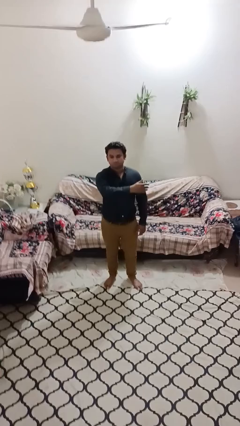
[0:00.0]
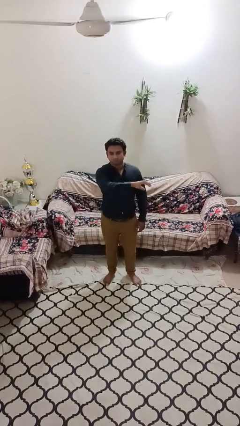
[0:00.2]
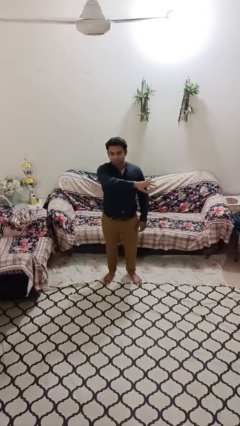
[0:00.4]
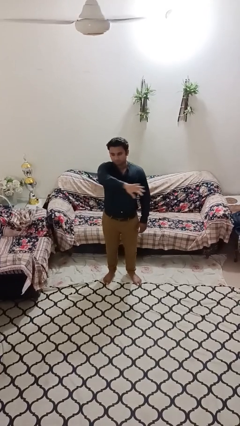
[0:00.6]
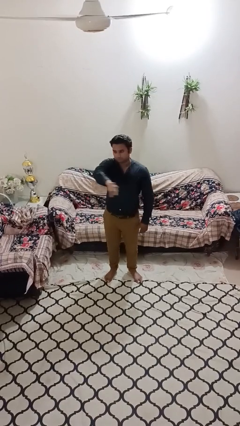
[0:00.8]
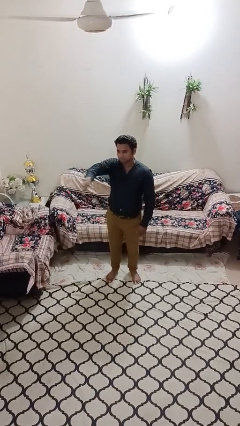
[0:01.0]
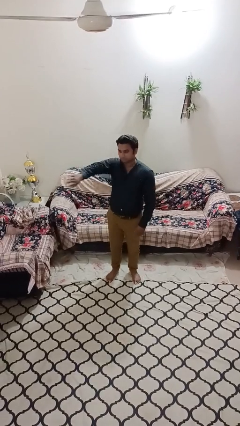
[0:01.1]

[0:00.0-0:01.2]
person gestures swipe right

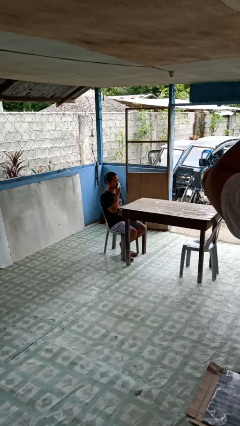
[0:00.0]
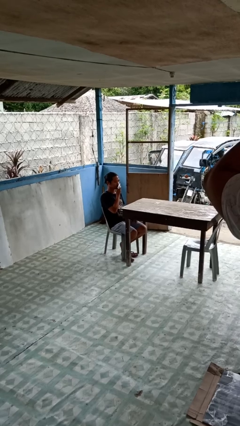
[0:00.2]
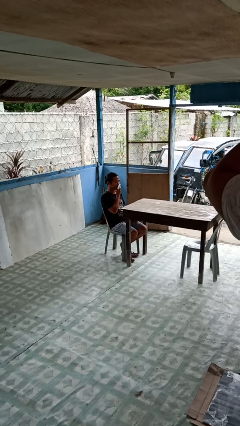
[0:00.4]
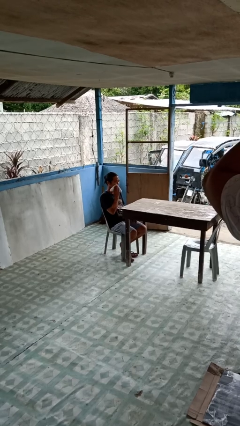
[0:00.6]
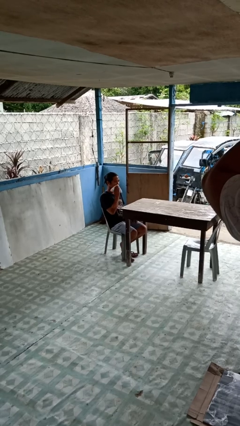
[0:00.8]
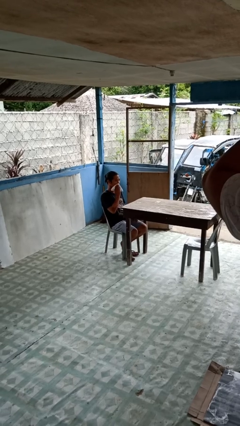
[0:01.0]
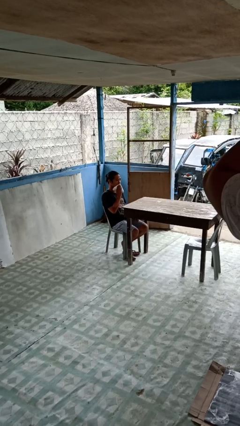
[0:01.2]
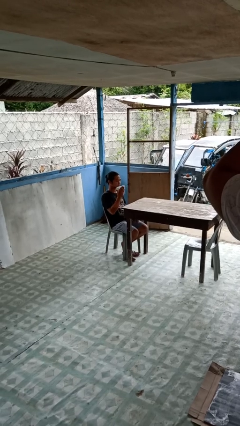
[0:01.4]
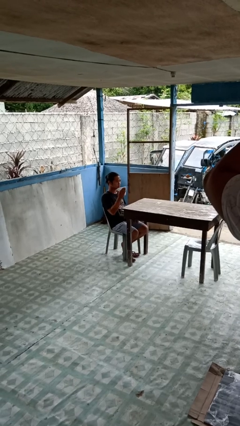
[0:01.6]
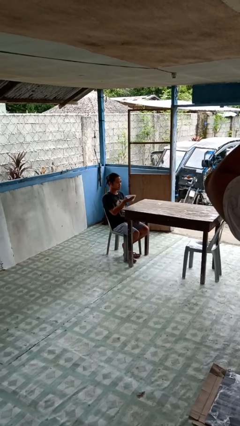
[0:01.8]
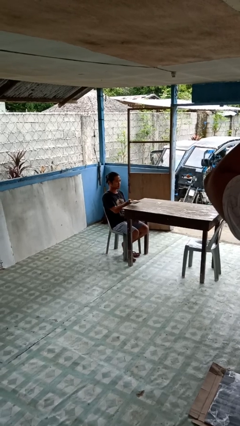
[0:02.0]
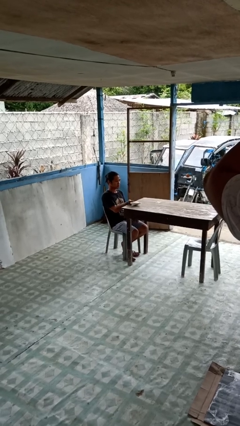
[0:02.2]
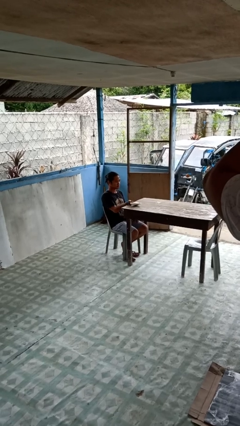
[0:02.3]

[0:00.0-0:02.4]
person wipes mouth with napkin

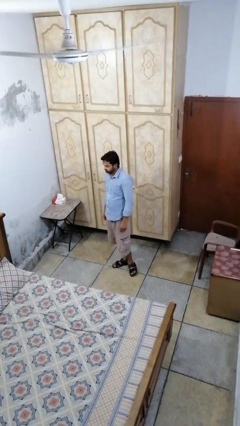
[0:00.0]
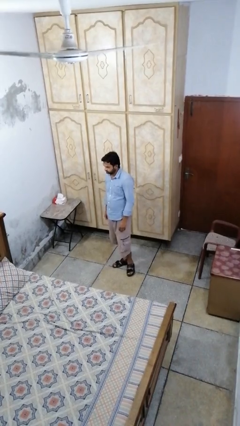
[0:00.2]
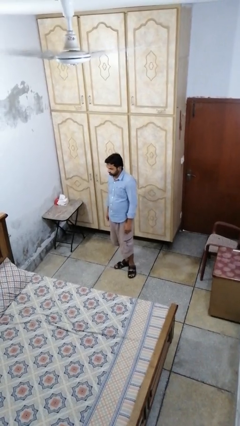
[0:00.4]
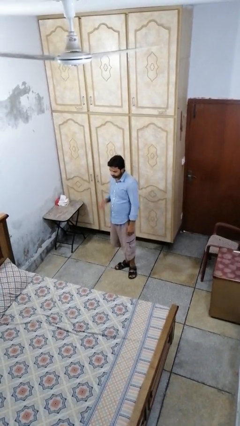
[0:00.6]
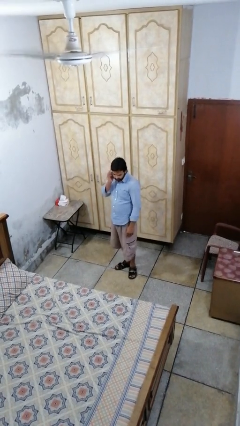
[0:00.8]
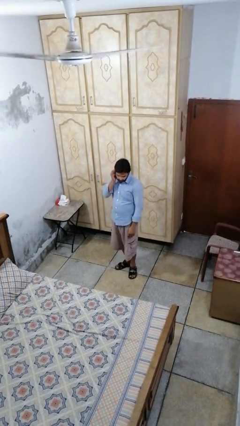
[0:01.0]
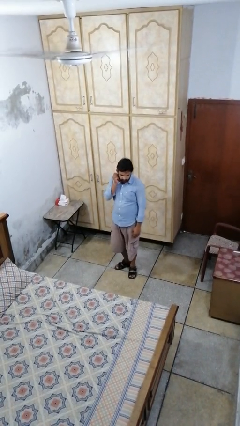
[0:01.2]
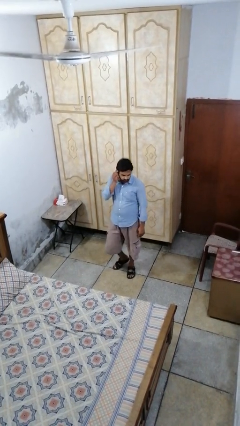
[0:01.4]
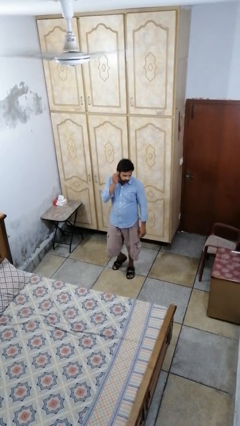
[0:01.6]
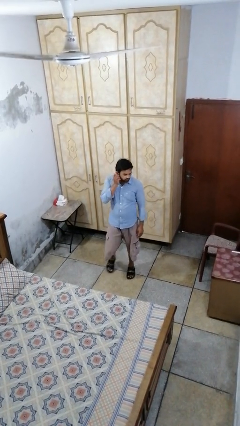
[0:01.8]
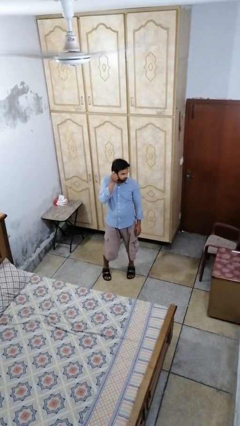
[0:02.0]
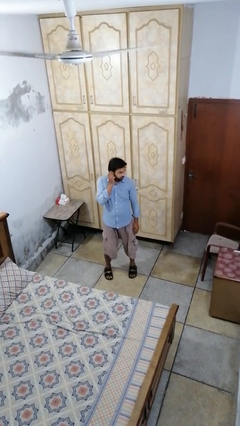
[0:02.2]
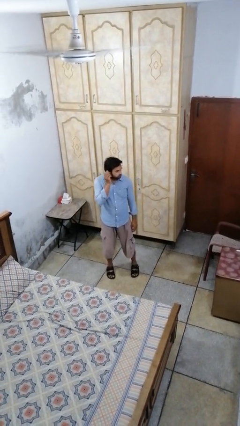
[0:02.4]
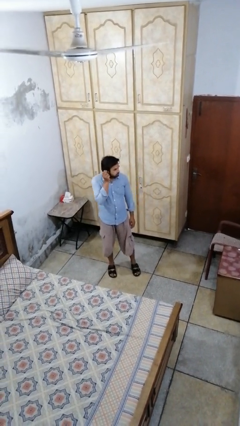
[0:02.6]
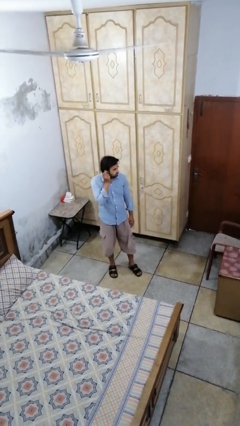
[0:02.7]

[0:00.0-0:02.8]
person touches earlobe

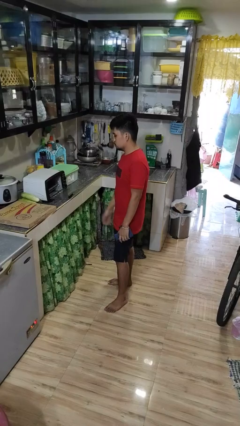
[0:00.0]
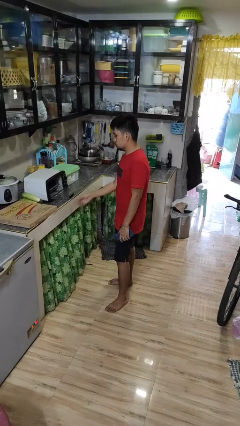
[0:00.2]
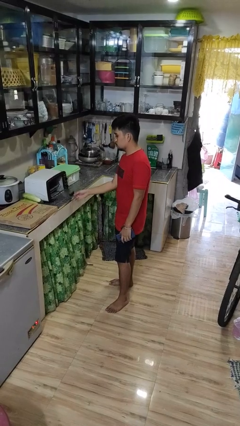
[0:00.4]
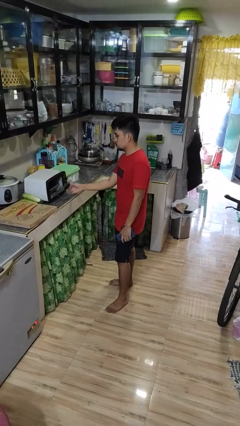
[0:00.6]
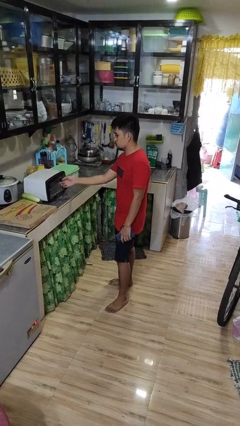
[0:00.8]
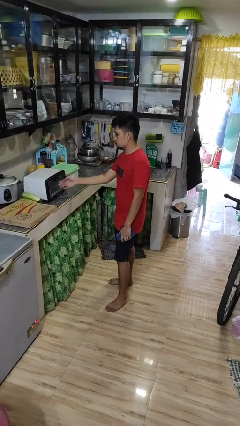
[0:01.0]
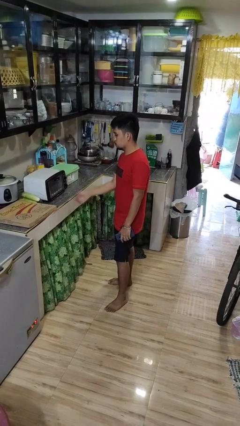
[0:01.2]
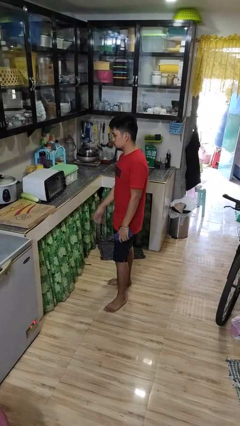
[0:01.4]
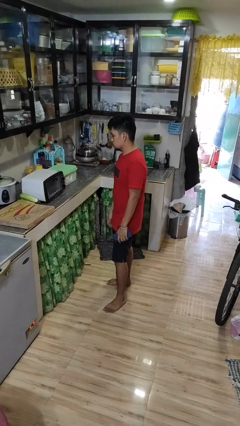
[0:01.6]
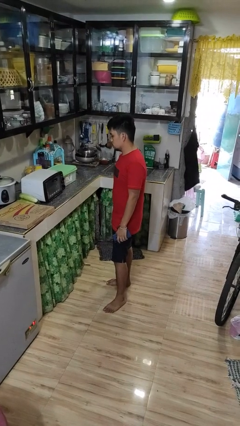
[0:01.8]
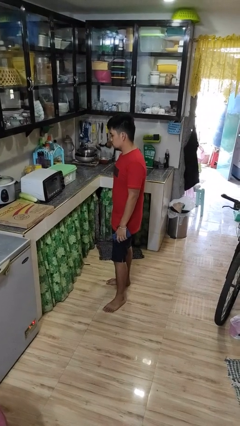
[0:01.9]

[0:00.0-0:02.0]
person closes microwave

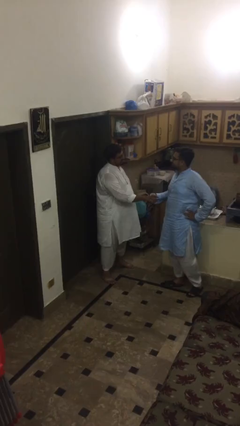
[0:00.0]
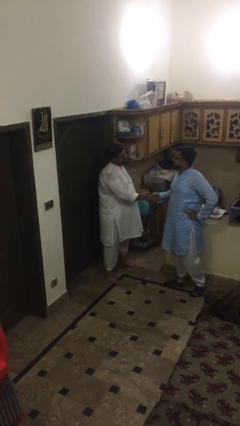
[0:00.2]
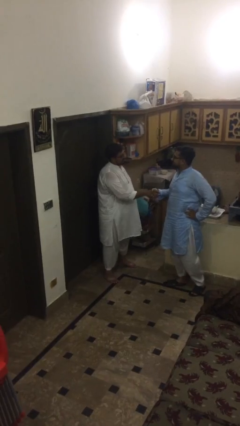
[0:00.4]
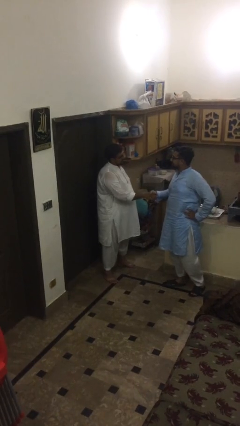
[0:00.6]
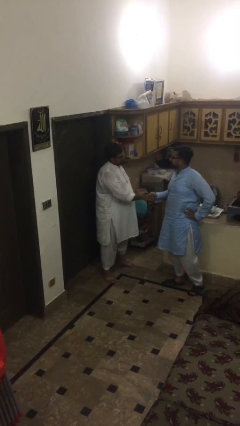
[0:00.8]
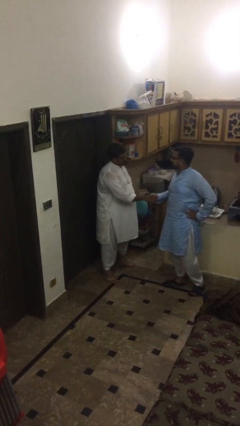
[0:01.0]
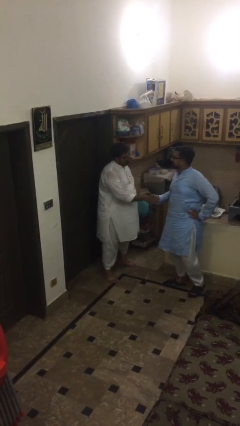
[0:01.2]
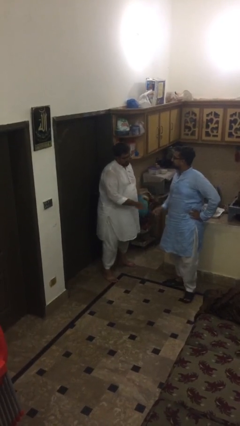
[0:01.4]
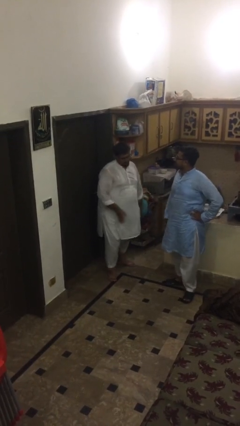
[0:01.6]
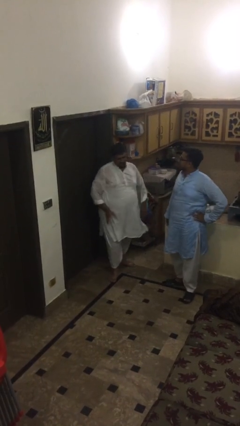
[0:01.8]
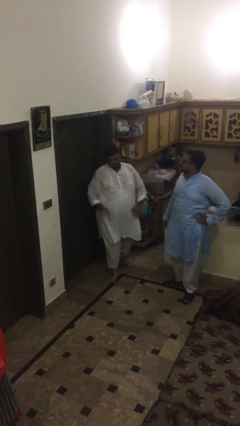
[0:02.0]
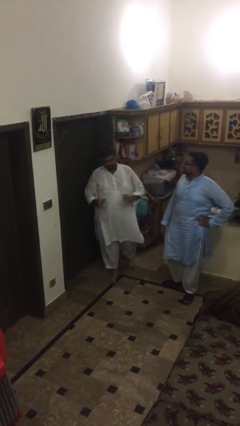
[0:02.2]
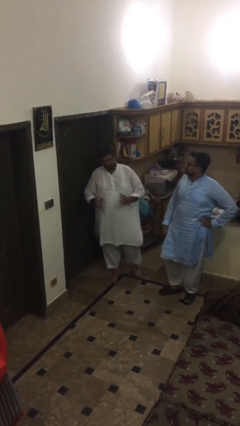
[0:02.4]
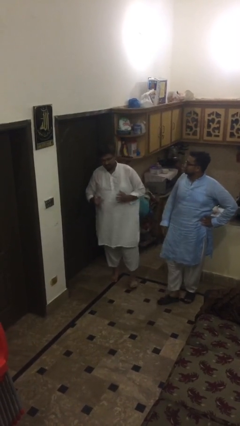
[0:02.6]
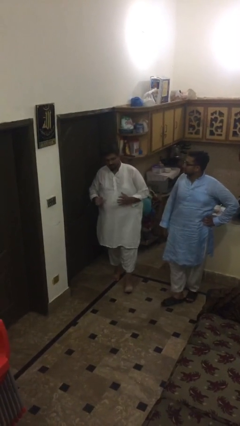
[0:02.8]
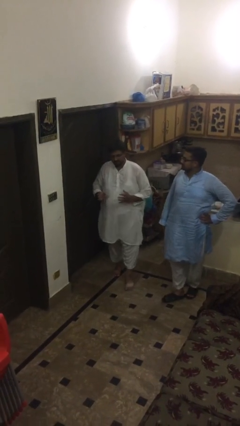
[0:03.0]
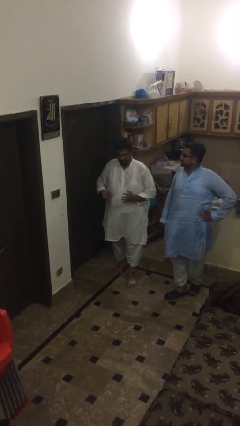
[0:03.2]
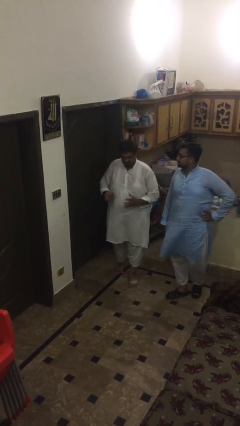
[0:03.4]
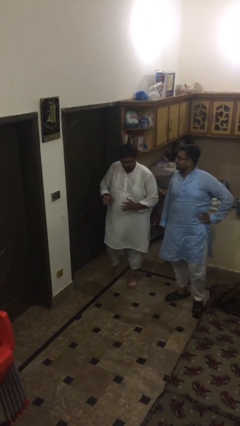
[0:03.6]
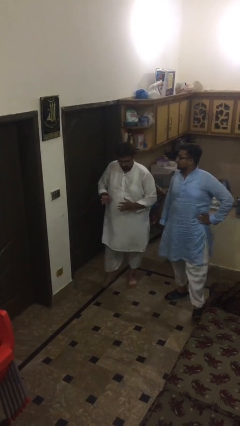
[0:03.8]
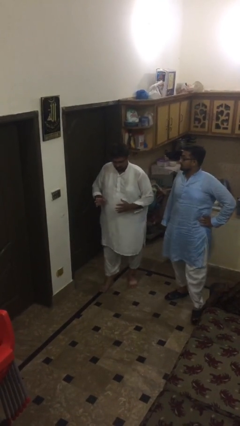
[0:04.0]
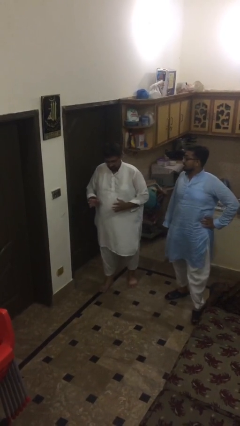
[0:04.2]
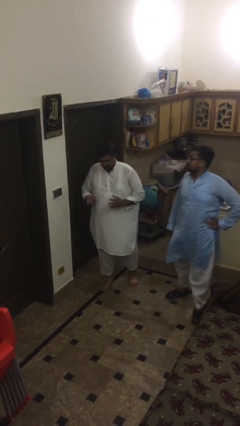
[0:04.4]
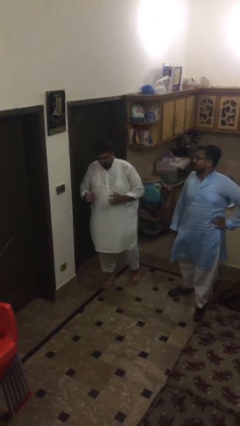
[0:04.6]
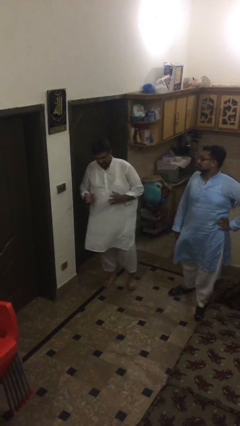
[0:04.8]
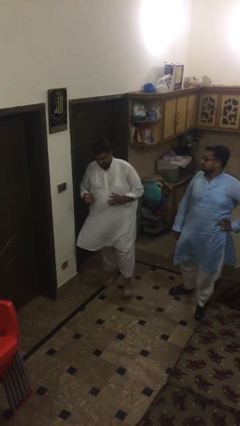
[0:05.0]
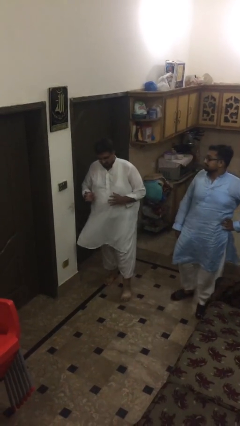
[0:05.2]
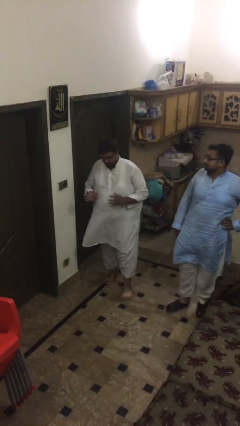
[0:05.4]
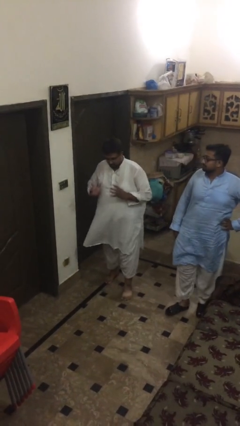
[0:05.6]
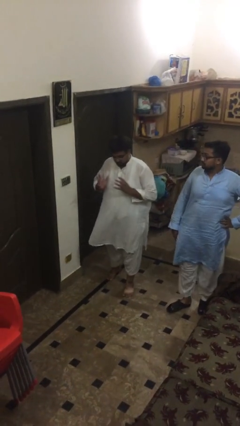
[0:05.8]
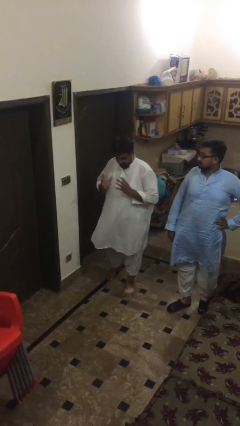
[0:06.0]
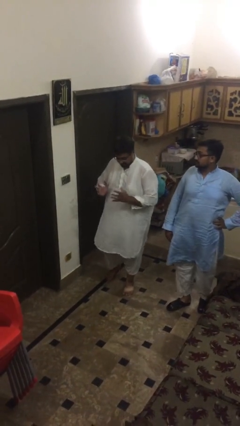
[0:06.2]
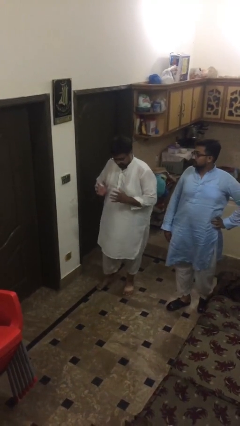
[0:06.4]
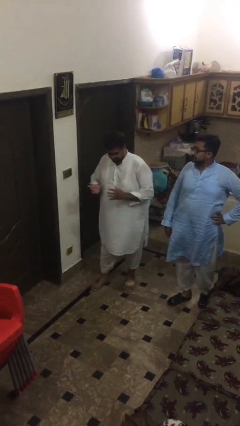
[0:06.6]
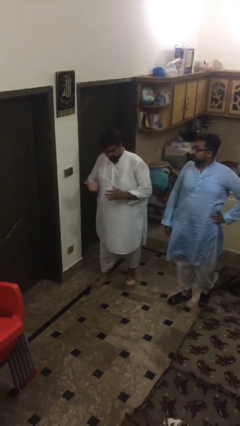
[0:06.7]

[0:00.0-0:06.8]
person talks to person

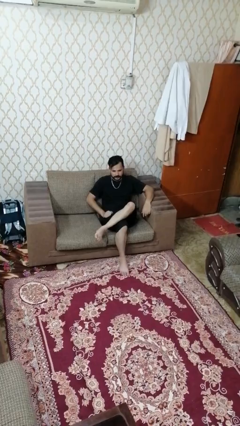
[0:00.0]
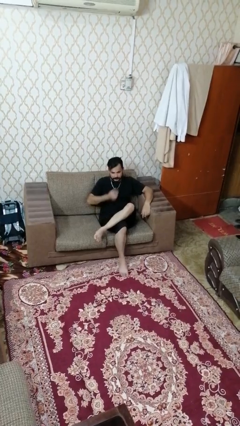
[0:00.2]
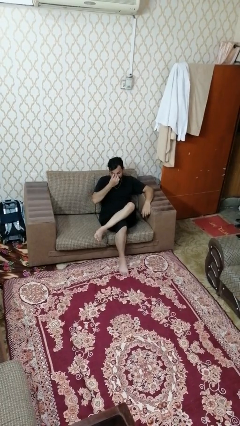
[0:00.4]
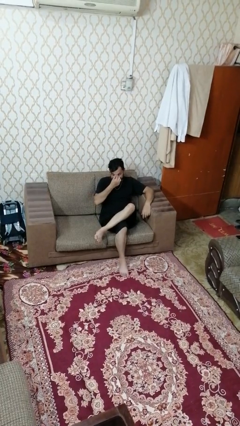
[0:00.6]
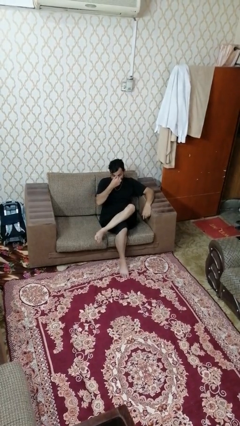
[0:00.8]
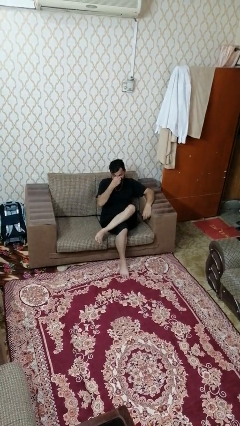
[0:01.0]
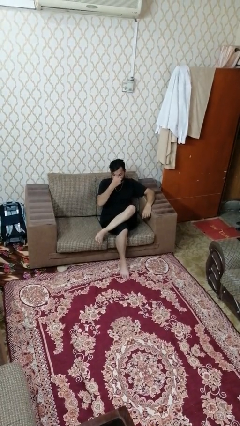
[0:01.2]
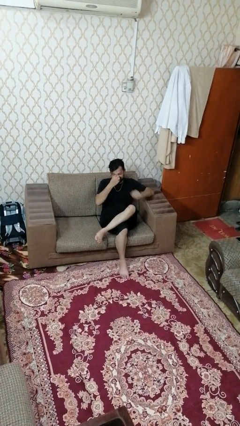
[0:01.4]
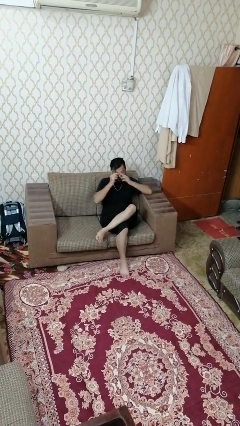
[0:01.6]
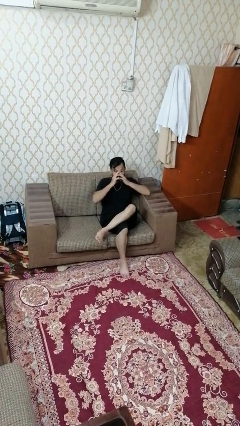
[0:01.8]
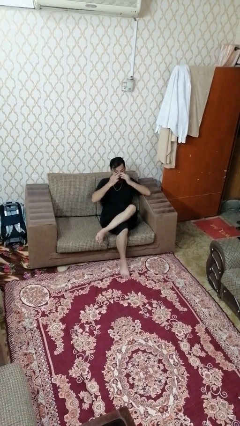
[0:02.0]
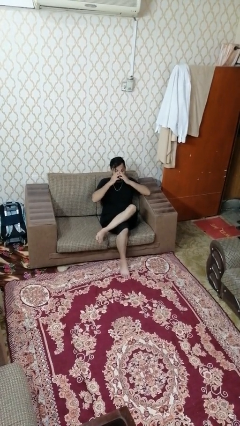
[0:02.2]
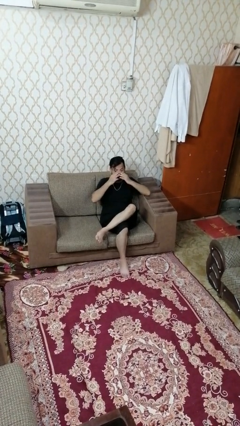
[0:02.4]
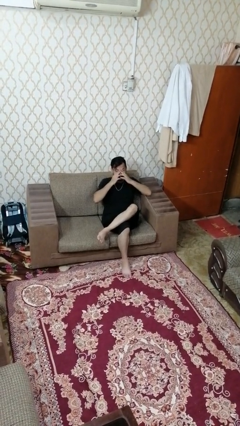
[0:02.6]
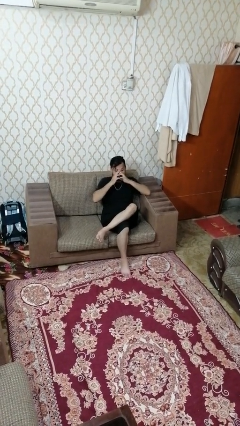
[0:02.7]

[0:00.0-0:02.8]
person rubs eyes
